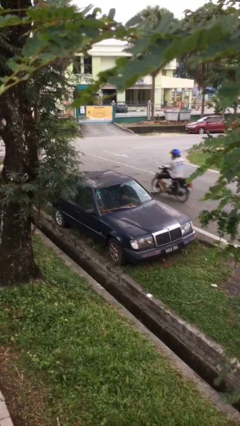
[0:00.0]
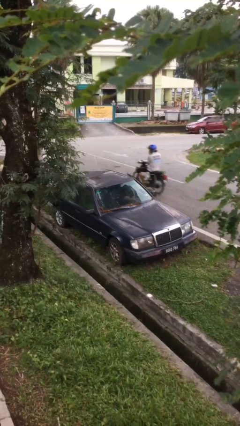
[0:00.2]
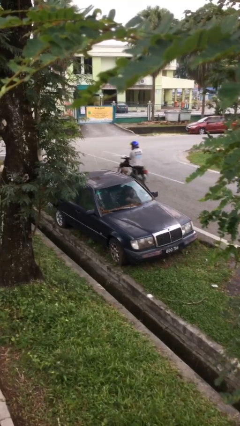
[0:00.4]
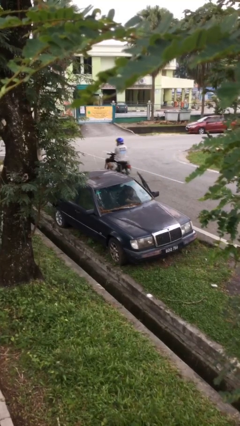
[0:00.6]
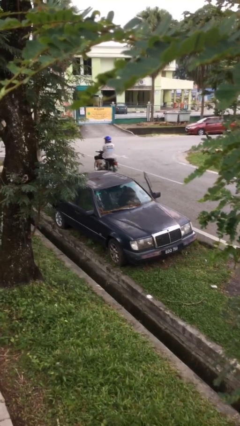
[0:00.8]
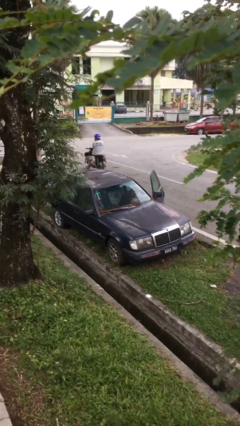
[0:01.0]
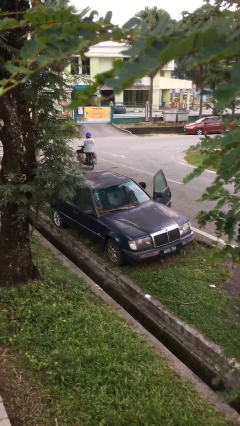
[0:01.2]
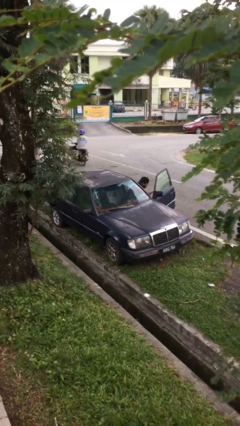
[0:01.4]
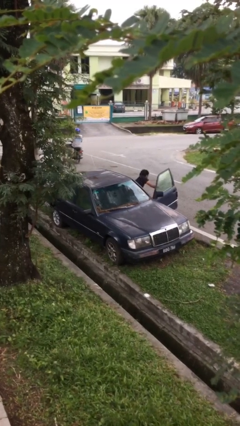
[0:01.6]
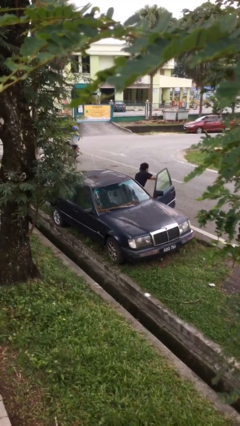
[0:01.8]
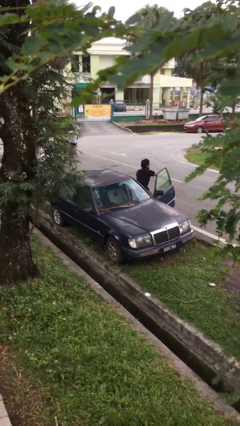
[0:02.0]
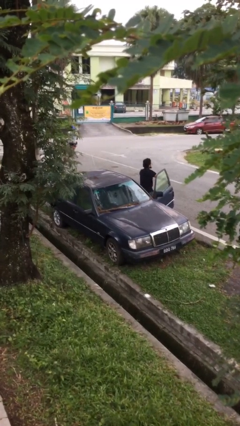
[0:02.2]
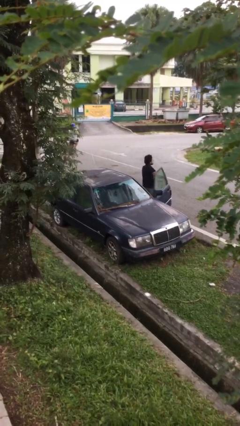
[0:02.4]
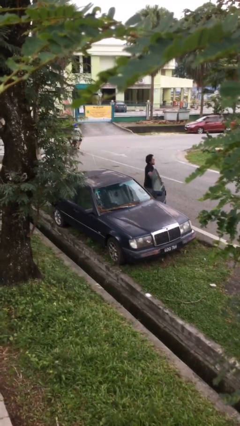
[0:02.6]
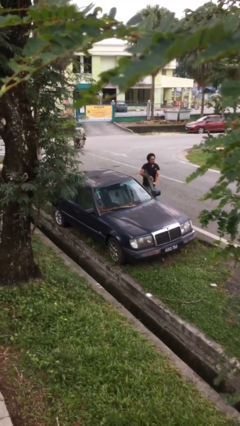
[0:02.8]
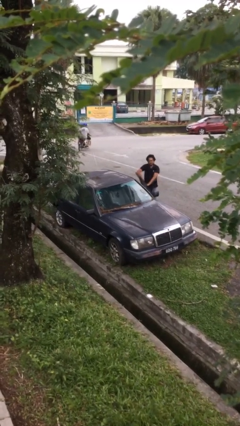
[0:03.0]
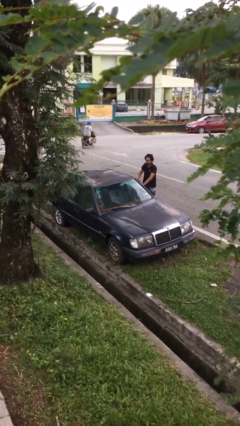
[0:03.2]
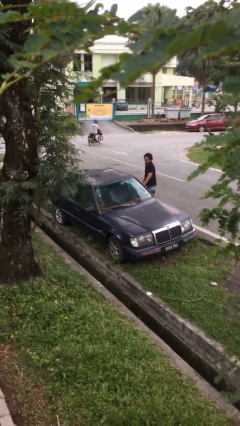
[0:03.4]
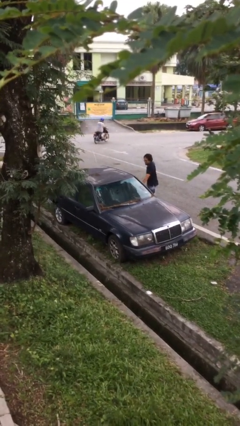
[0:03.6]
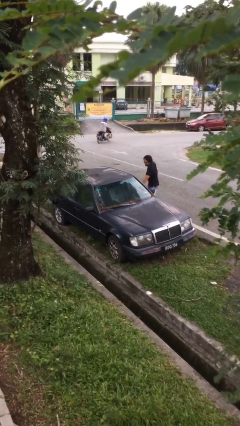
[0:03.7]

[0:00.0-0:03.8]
car drops off person

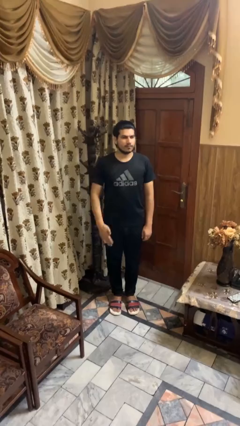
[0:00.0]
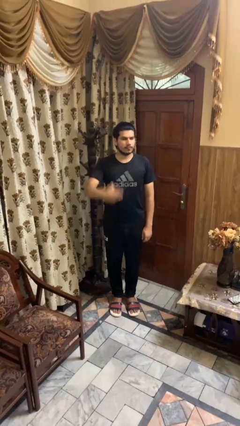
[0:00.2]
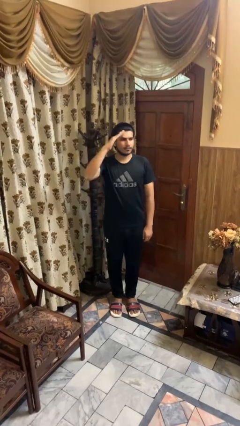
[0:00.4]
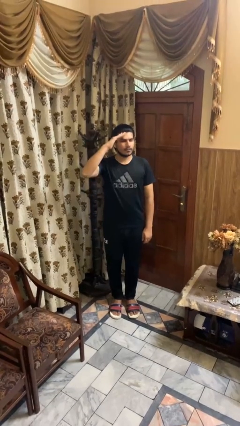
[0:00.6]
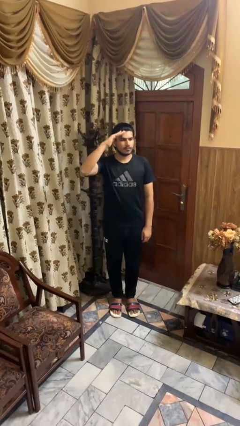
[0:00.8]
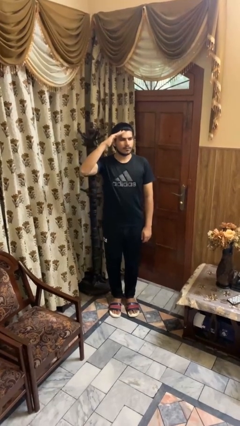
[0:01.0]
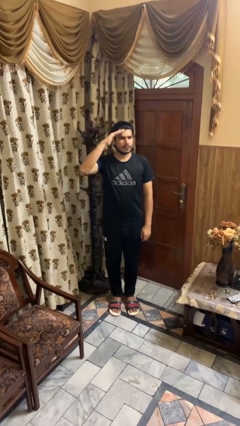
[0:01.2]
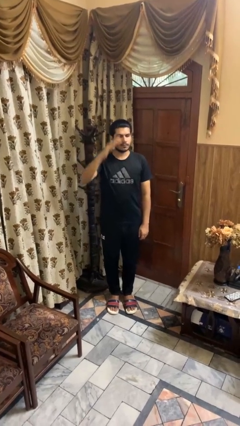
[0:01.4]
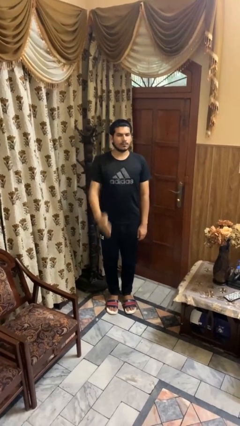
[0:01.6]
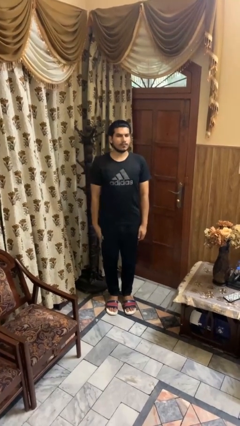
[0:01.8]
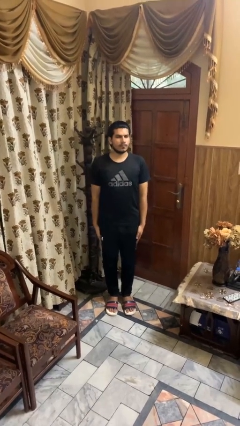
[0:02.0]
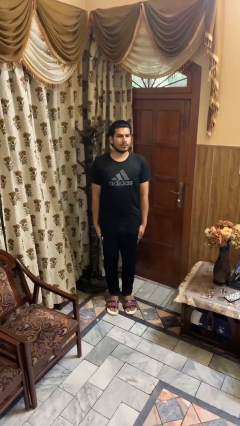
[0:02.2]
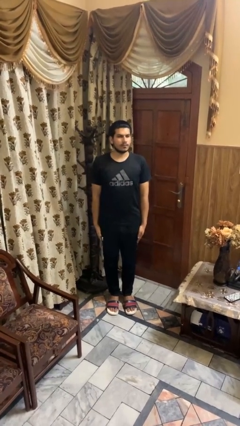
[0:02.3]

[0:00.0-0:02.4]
person salutes

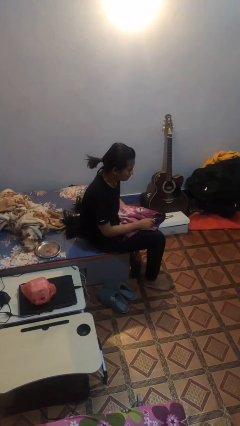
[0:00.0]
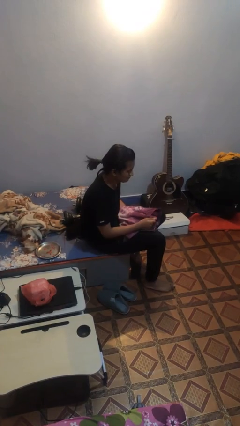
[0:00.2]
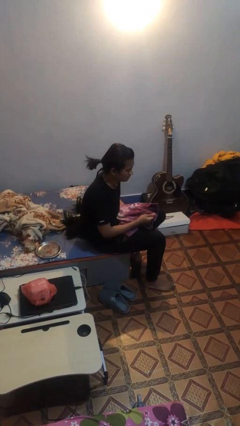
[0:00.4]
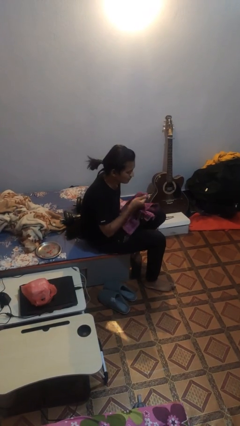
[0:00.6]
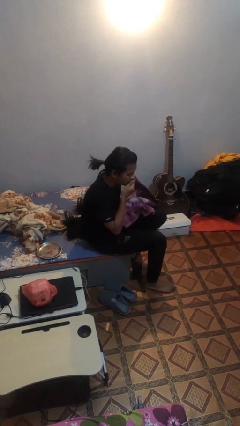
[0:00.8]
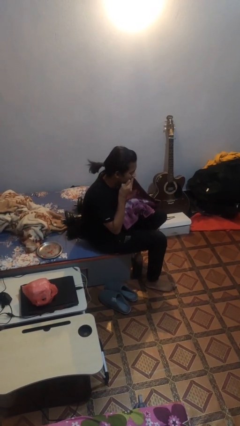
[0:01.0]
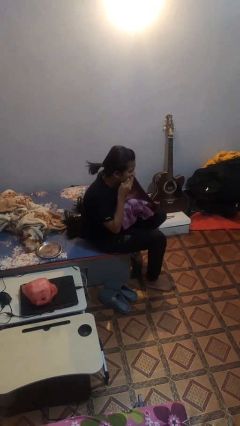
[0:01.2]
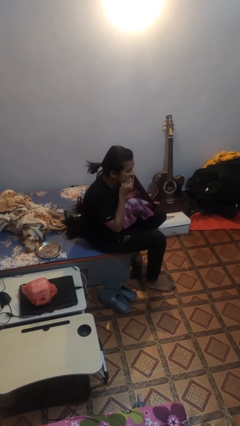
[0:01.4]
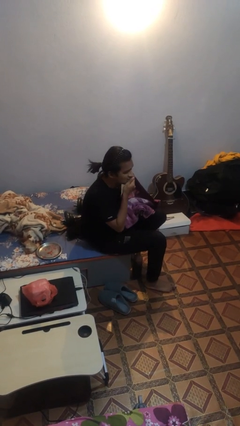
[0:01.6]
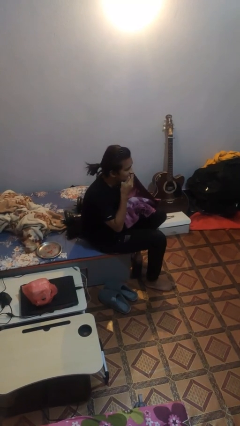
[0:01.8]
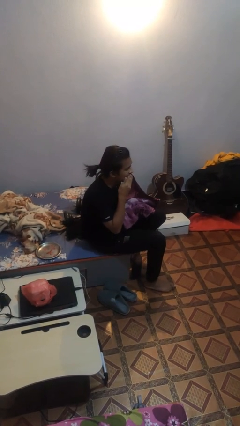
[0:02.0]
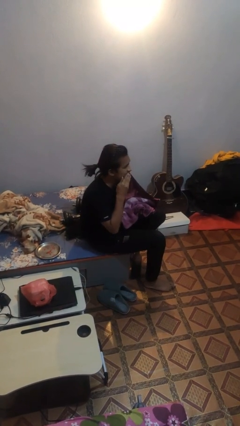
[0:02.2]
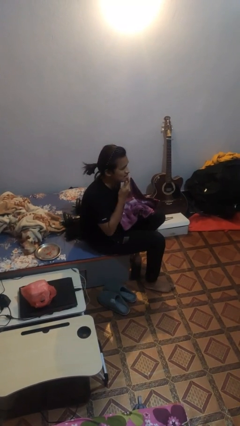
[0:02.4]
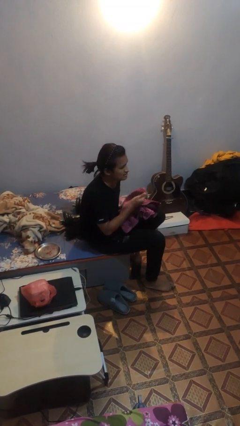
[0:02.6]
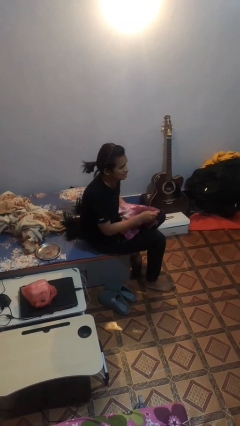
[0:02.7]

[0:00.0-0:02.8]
person wipes mouth with napkin

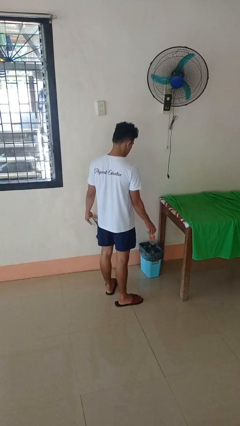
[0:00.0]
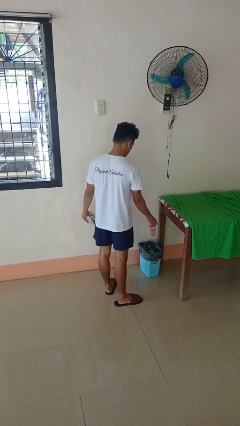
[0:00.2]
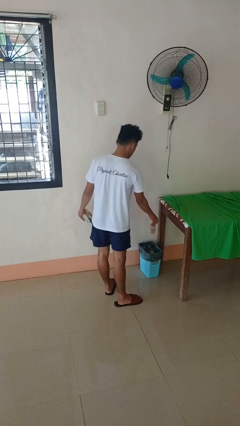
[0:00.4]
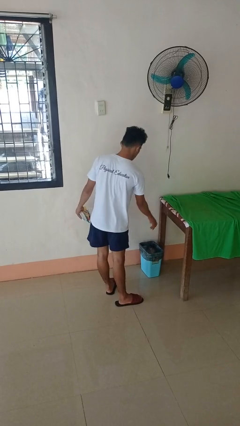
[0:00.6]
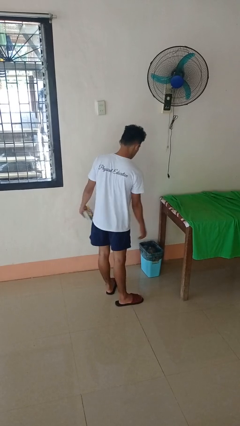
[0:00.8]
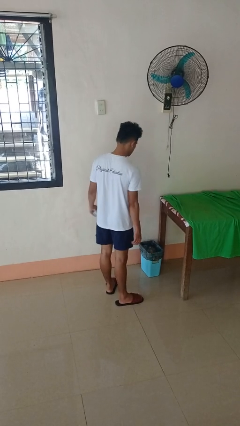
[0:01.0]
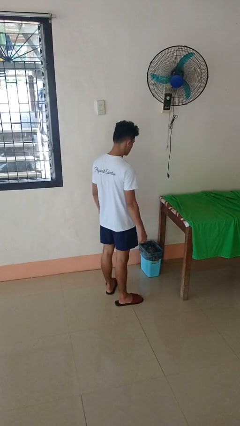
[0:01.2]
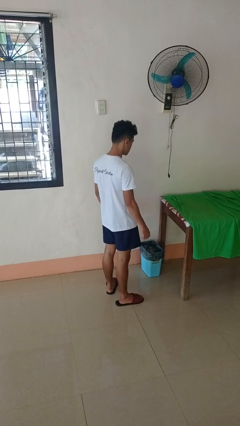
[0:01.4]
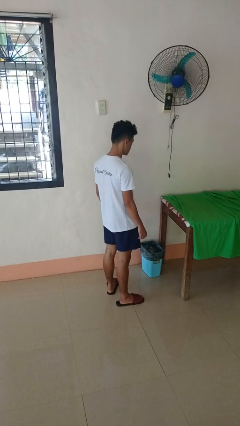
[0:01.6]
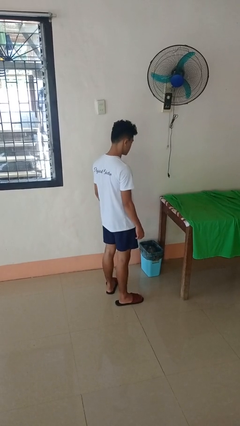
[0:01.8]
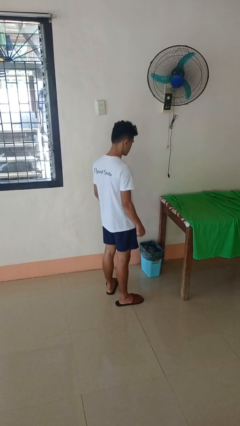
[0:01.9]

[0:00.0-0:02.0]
person discards trash

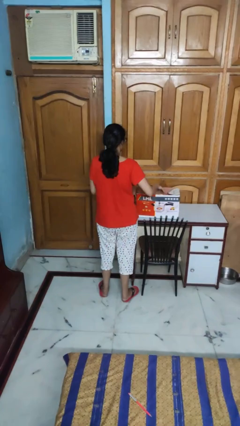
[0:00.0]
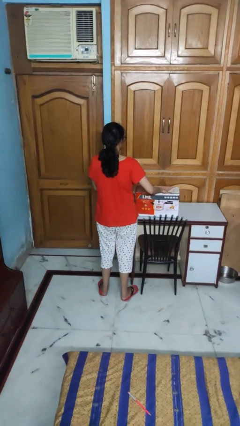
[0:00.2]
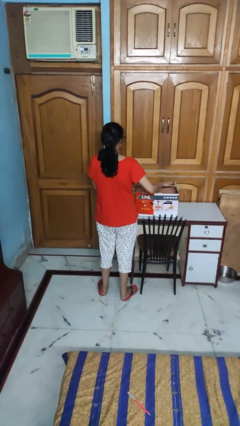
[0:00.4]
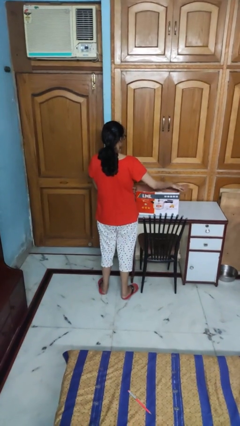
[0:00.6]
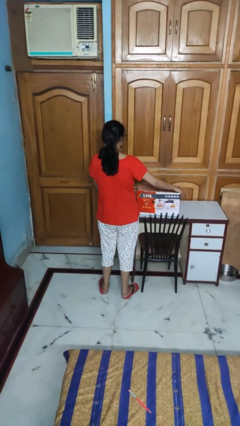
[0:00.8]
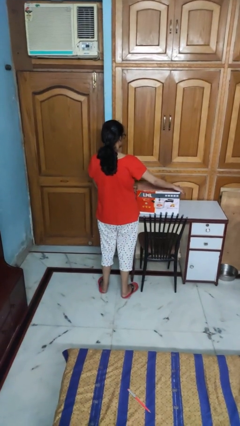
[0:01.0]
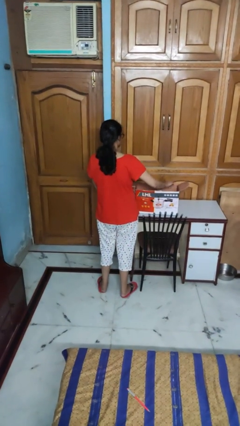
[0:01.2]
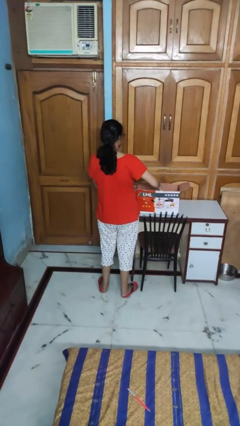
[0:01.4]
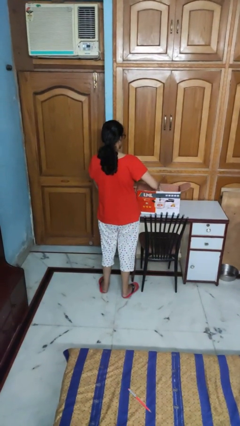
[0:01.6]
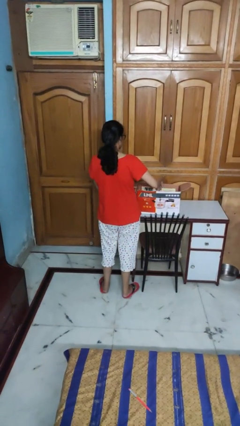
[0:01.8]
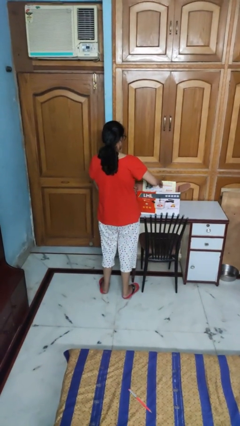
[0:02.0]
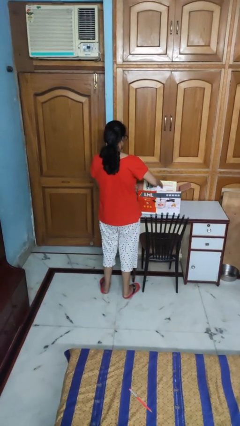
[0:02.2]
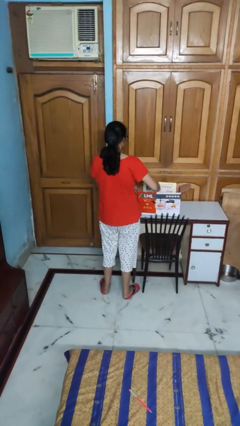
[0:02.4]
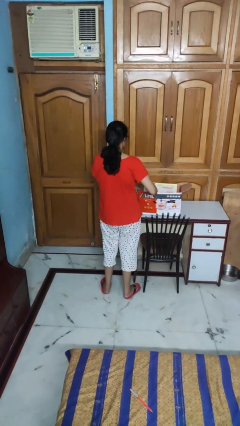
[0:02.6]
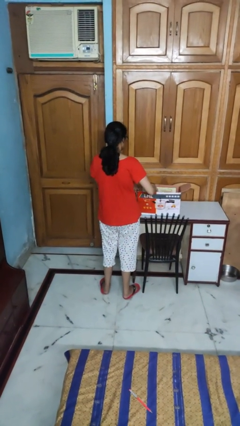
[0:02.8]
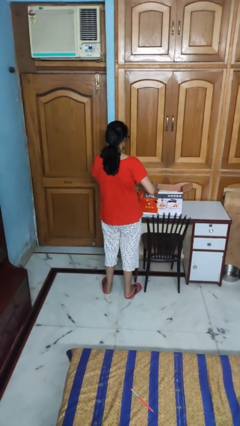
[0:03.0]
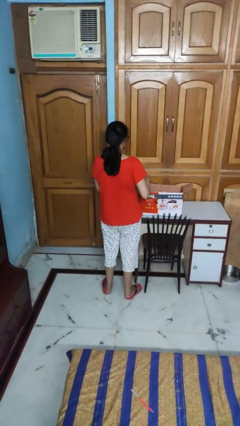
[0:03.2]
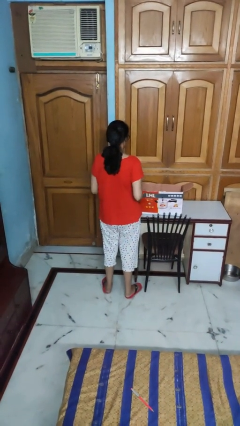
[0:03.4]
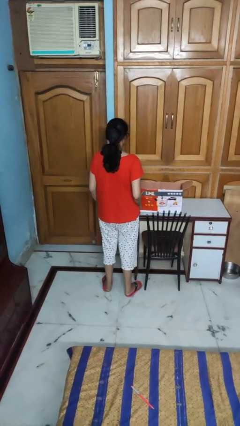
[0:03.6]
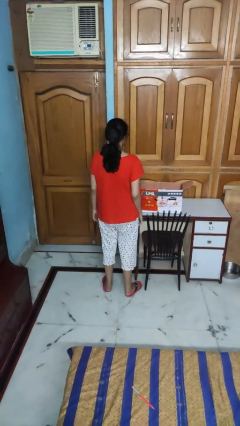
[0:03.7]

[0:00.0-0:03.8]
person searches in box

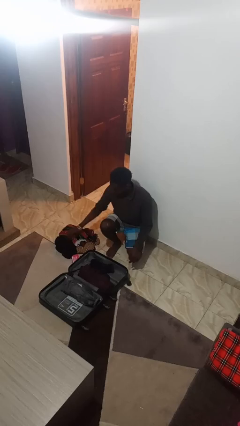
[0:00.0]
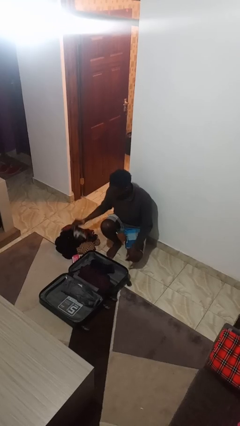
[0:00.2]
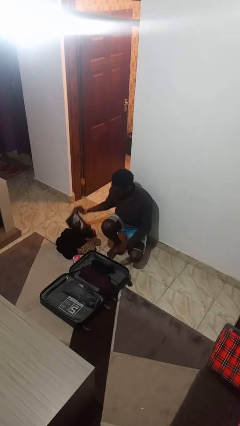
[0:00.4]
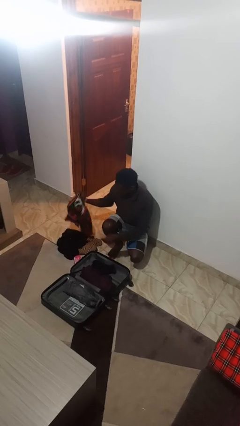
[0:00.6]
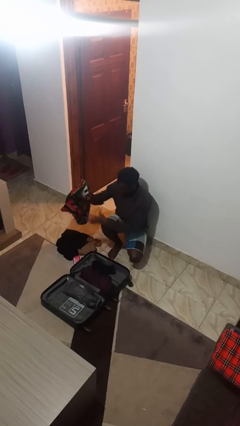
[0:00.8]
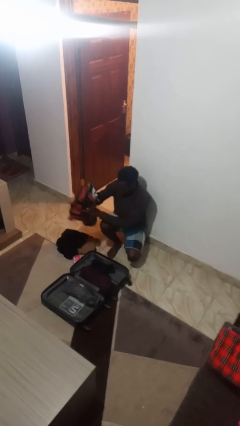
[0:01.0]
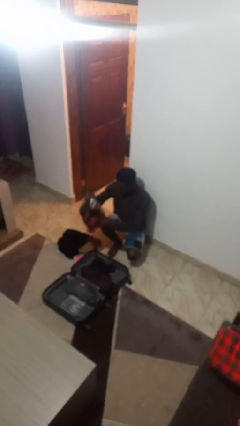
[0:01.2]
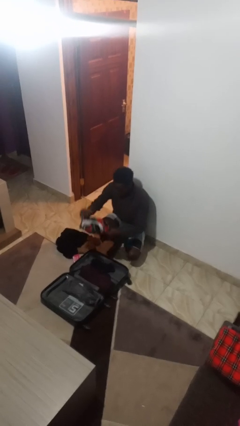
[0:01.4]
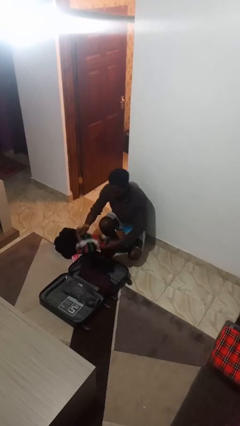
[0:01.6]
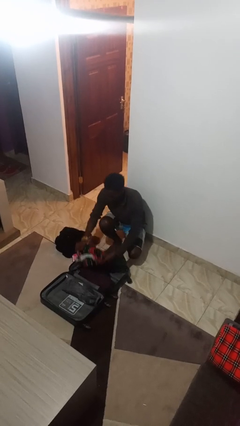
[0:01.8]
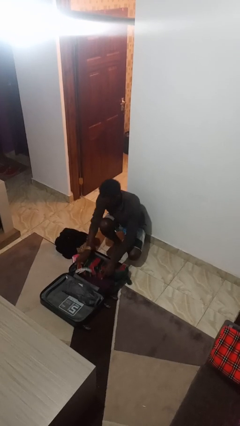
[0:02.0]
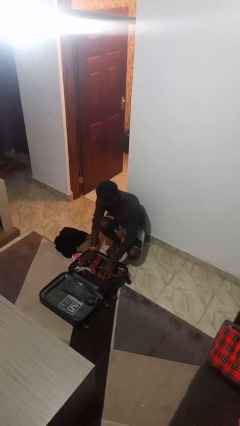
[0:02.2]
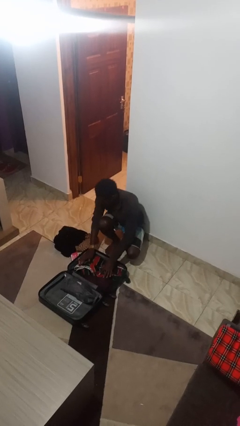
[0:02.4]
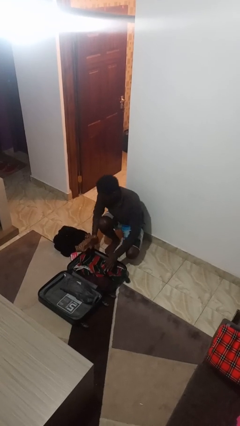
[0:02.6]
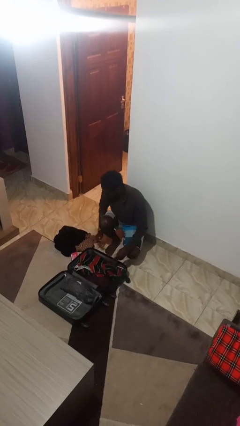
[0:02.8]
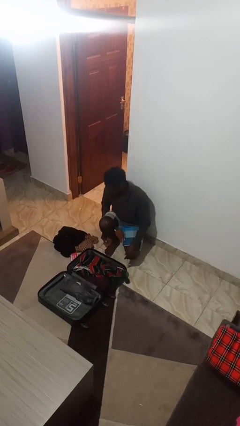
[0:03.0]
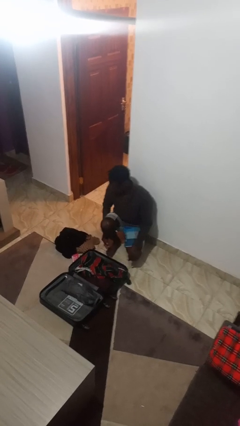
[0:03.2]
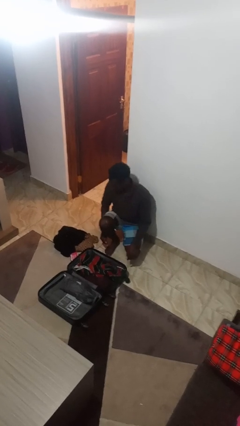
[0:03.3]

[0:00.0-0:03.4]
person loads clothes into suitcase
